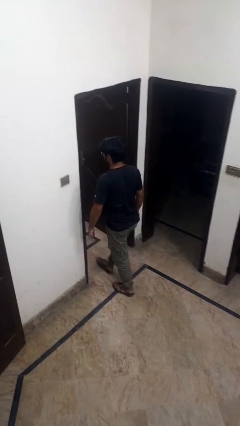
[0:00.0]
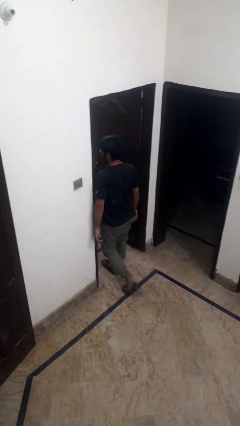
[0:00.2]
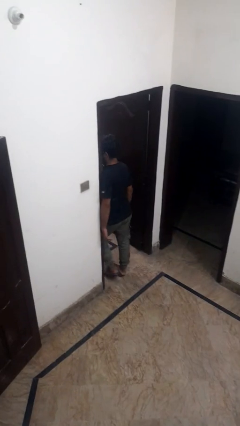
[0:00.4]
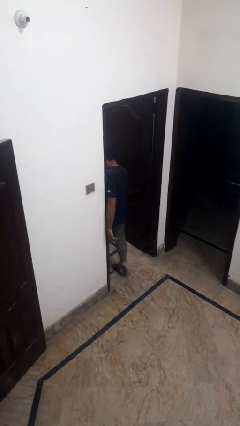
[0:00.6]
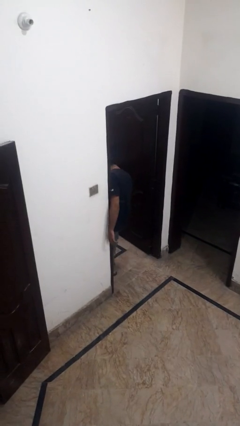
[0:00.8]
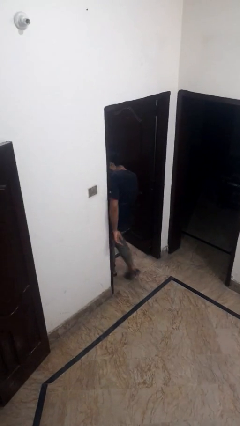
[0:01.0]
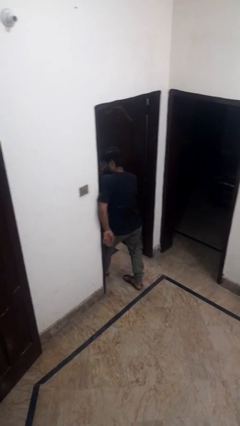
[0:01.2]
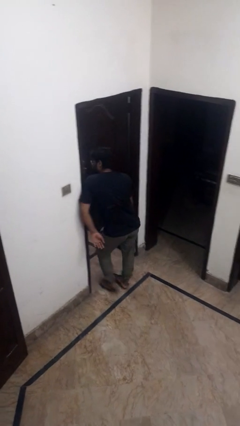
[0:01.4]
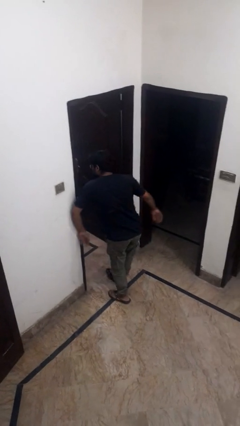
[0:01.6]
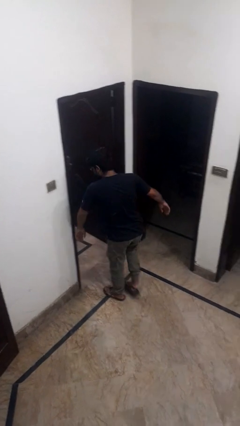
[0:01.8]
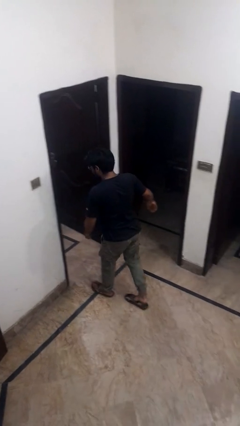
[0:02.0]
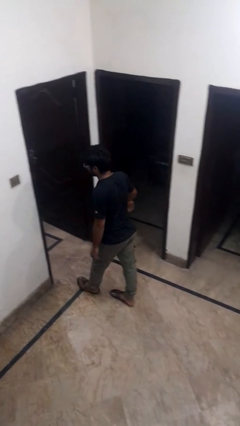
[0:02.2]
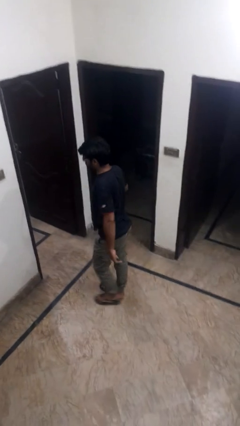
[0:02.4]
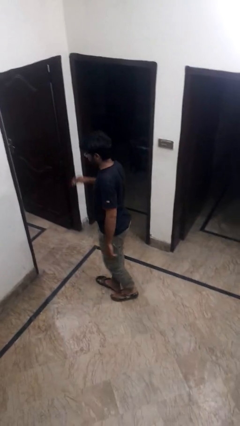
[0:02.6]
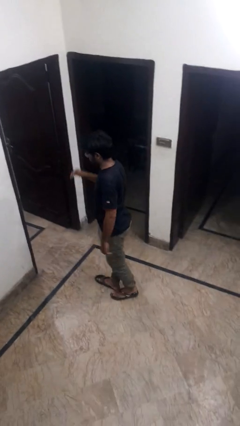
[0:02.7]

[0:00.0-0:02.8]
person bumps into wall

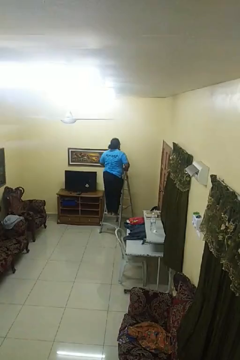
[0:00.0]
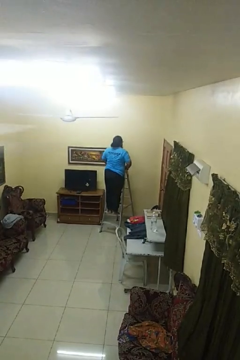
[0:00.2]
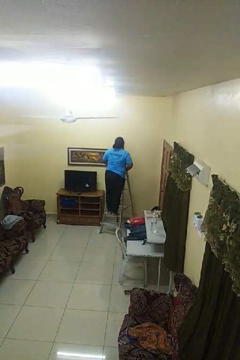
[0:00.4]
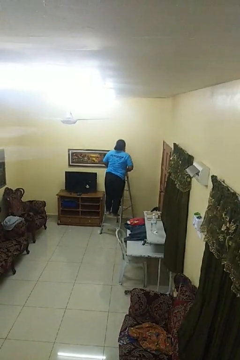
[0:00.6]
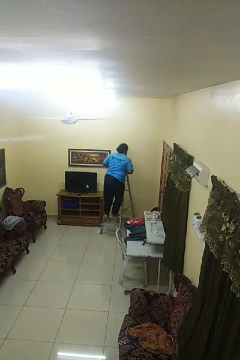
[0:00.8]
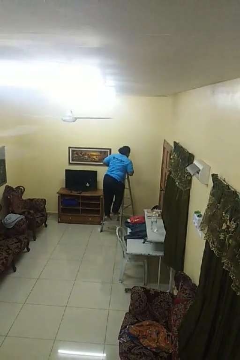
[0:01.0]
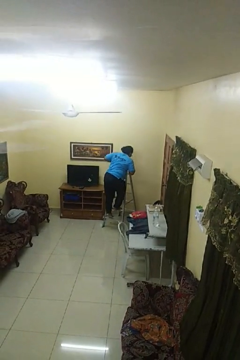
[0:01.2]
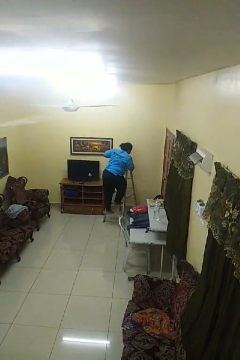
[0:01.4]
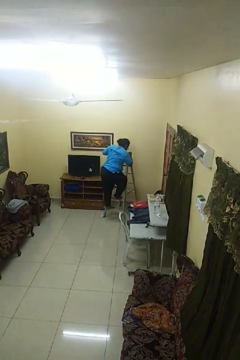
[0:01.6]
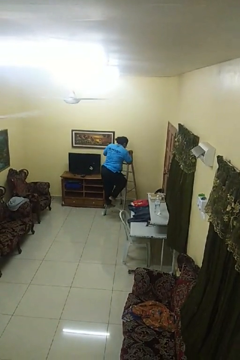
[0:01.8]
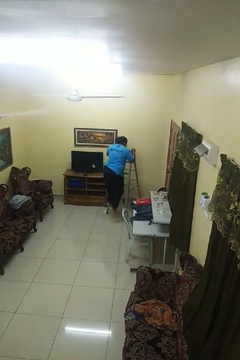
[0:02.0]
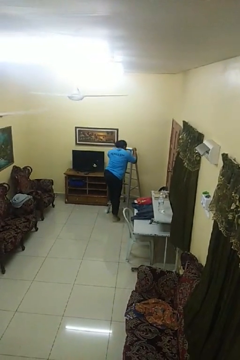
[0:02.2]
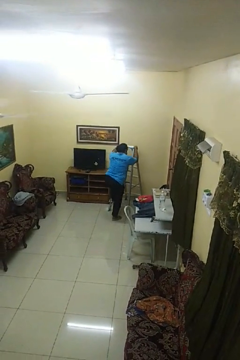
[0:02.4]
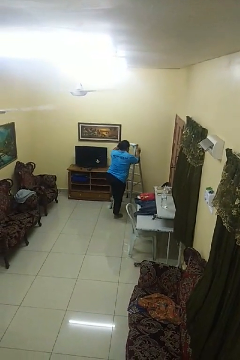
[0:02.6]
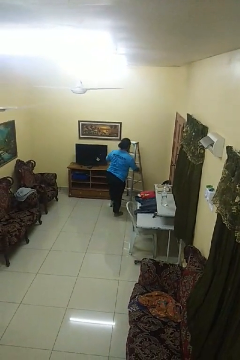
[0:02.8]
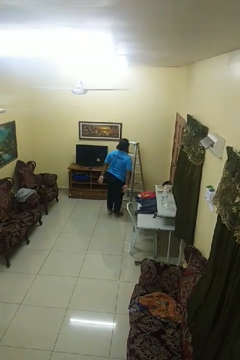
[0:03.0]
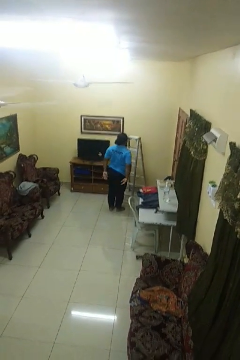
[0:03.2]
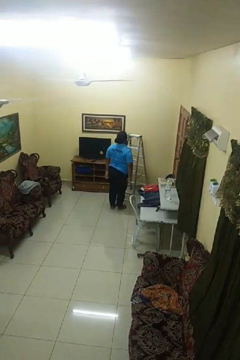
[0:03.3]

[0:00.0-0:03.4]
person climbs down ladder

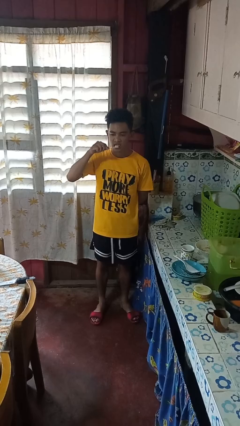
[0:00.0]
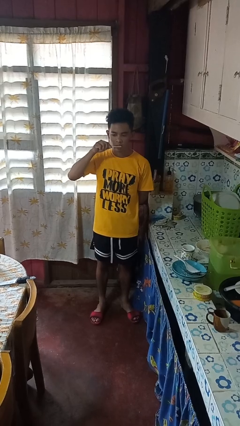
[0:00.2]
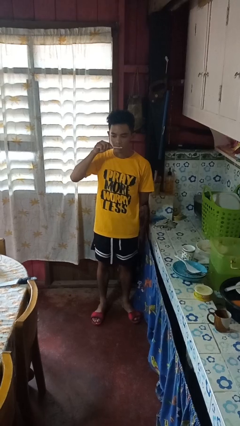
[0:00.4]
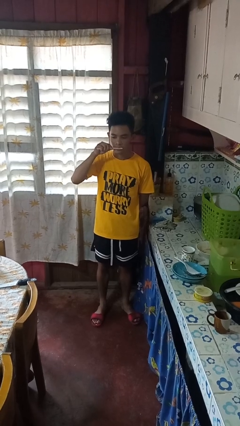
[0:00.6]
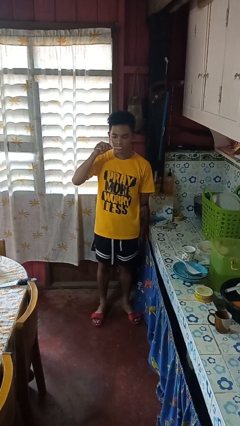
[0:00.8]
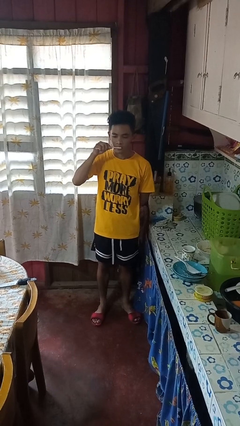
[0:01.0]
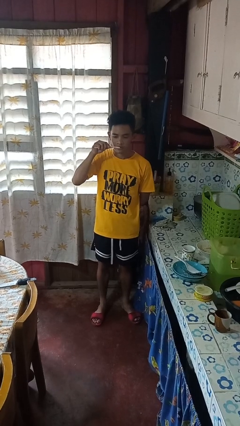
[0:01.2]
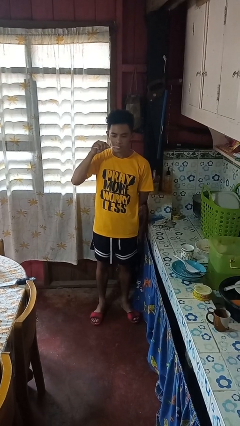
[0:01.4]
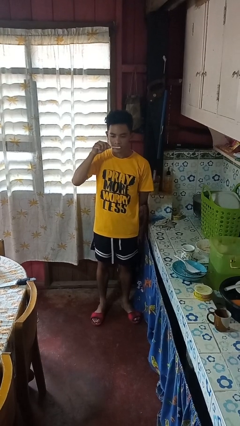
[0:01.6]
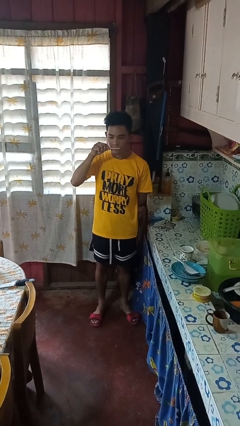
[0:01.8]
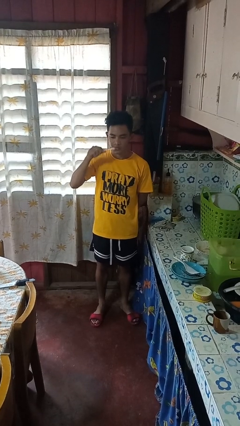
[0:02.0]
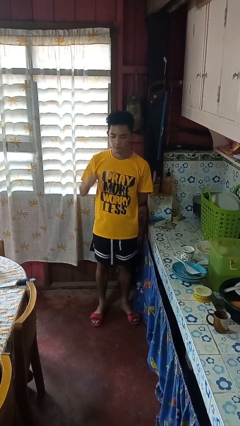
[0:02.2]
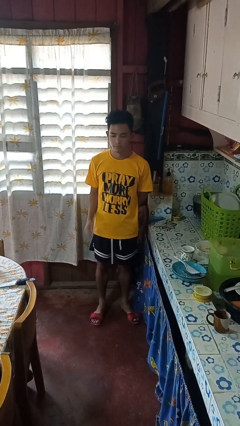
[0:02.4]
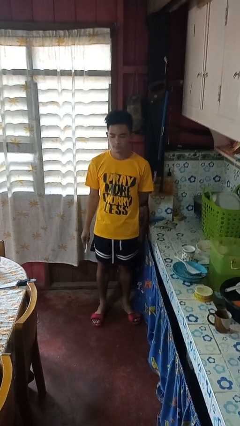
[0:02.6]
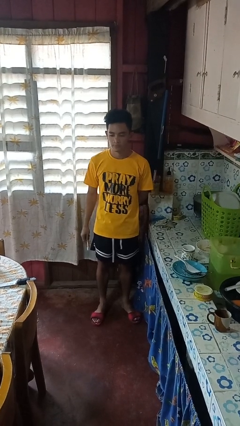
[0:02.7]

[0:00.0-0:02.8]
person brushes teeth

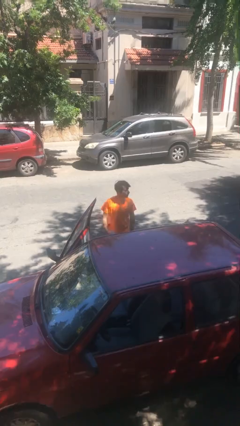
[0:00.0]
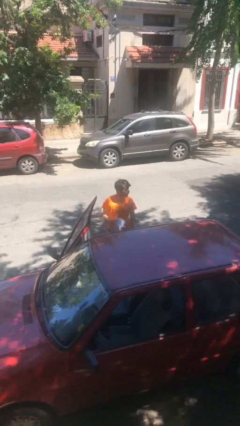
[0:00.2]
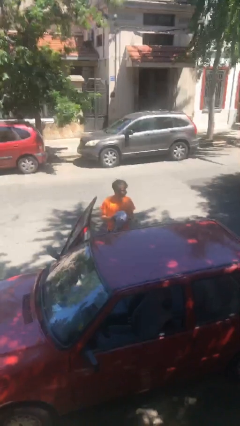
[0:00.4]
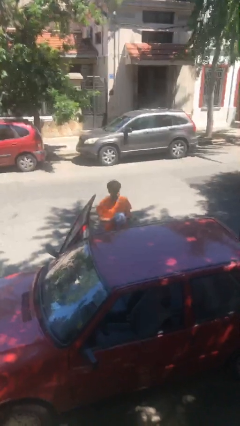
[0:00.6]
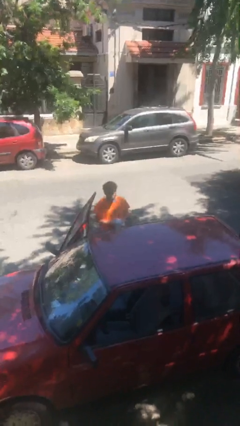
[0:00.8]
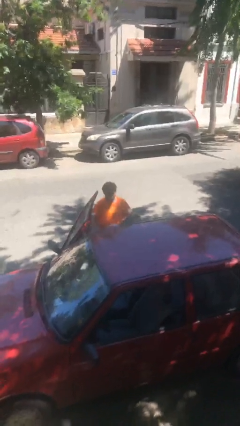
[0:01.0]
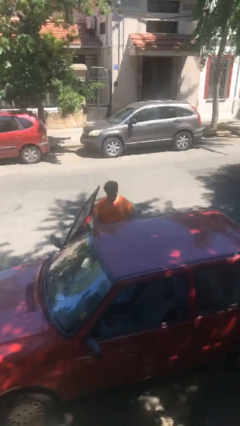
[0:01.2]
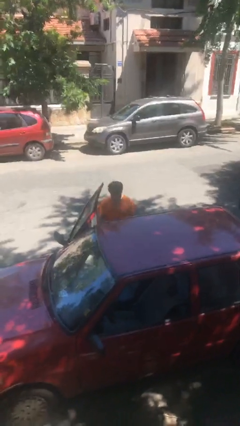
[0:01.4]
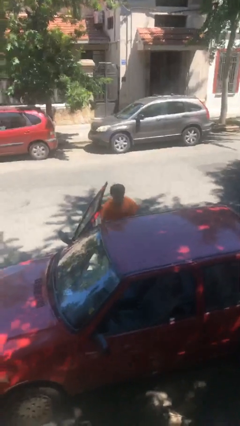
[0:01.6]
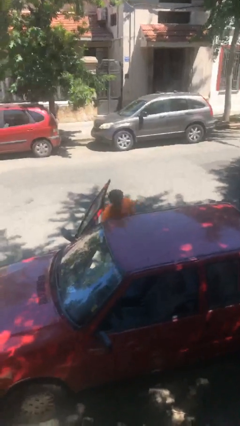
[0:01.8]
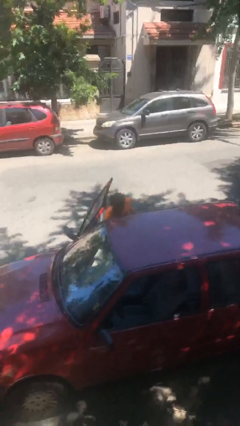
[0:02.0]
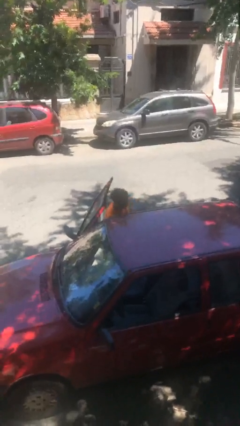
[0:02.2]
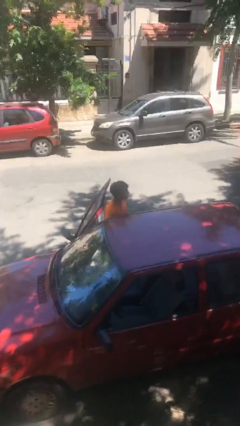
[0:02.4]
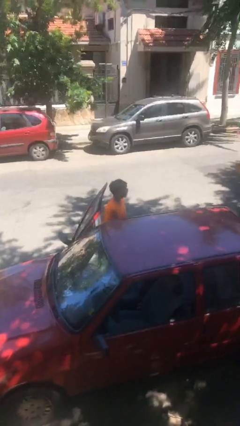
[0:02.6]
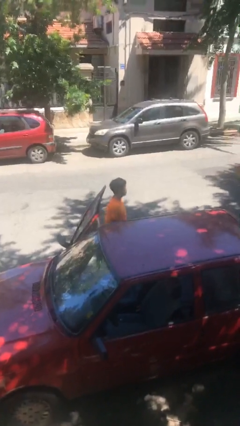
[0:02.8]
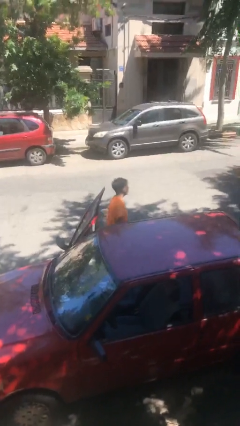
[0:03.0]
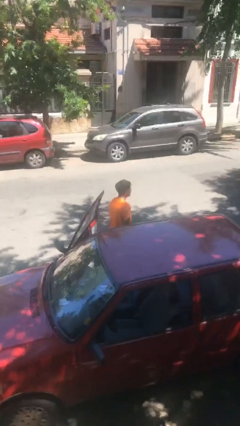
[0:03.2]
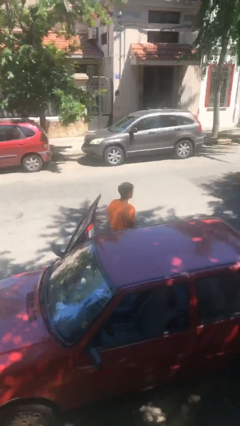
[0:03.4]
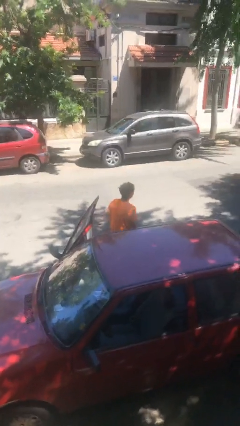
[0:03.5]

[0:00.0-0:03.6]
person loads car

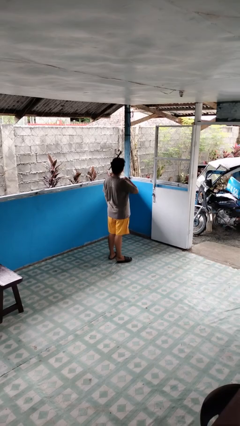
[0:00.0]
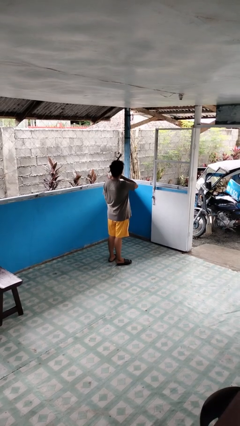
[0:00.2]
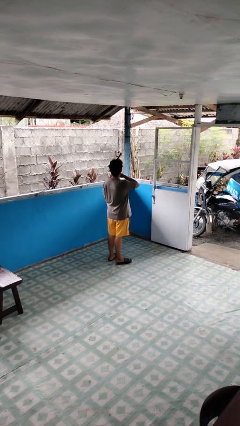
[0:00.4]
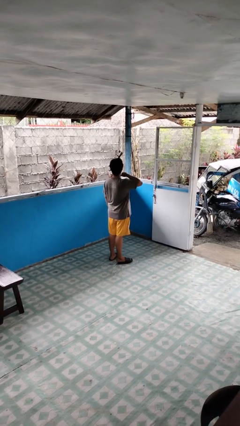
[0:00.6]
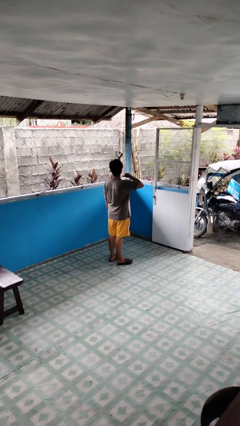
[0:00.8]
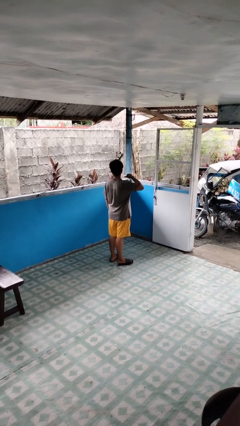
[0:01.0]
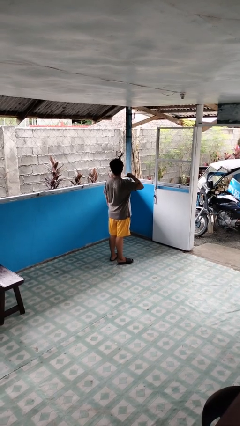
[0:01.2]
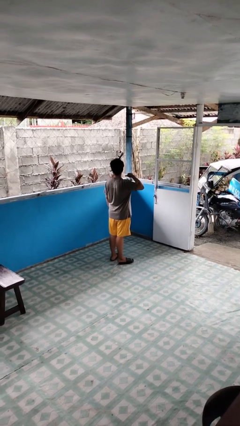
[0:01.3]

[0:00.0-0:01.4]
person gestures cut

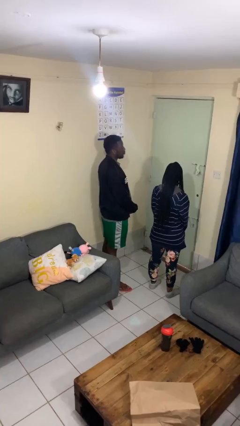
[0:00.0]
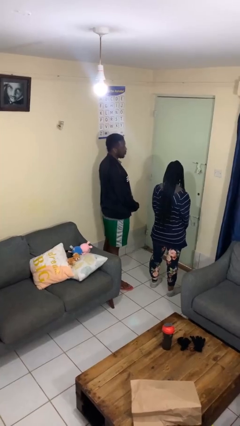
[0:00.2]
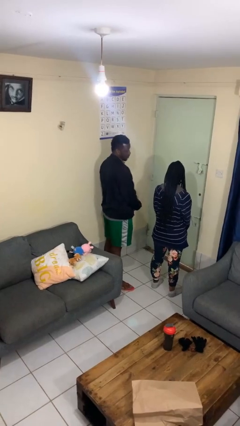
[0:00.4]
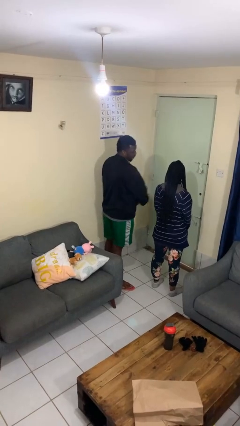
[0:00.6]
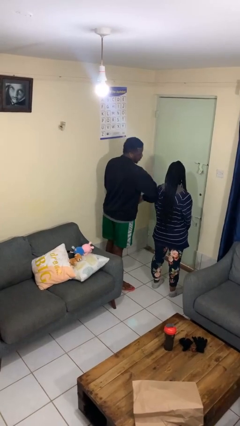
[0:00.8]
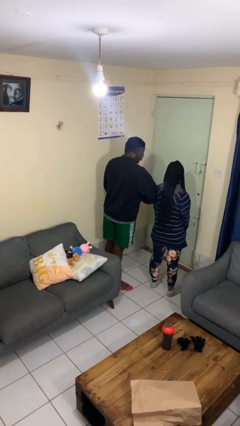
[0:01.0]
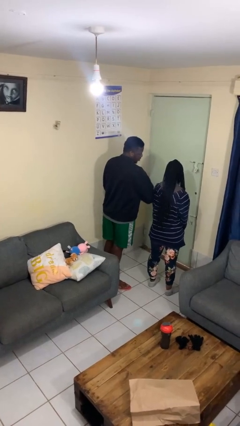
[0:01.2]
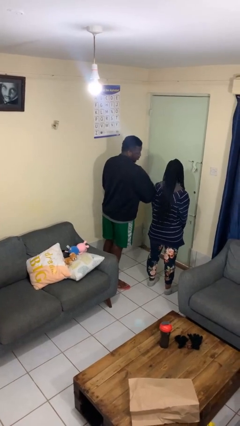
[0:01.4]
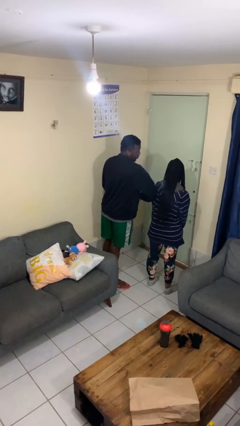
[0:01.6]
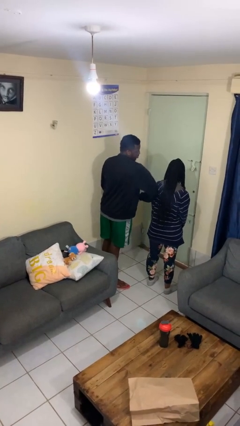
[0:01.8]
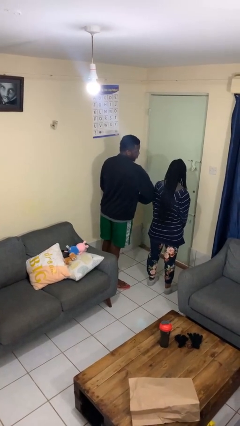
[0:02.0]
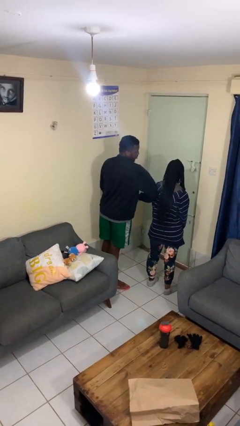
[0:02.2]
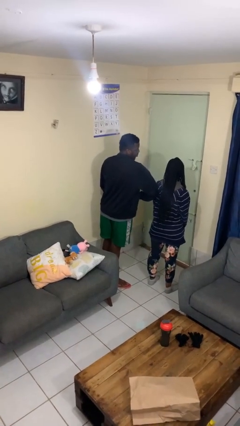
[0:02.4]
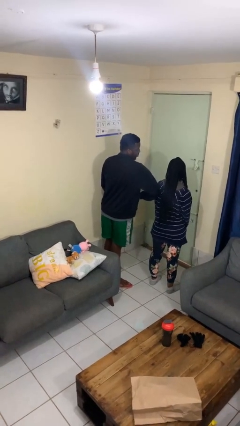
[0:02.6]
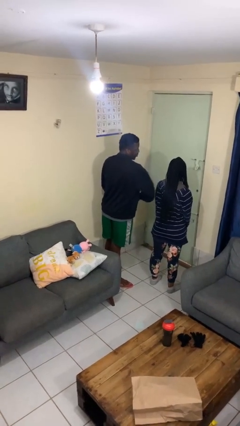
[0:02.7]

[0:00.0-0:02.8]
person nudges person with elbow

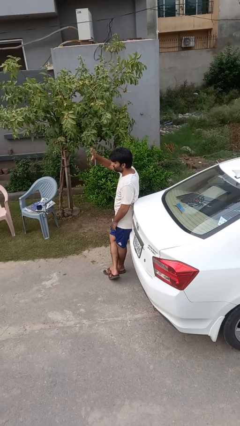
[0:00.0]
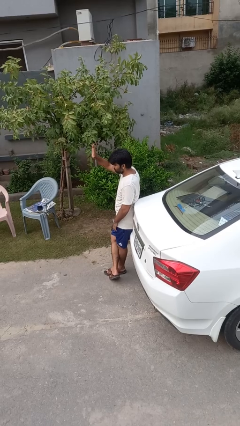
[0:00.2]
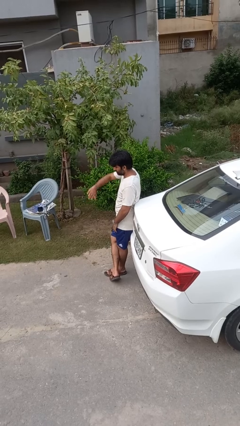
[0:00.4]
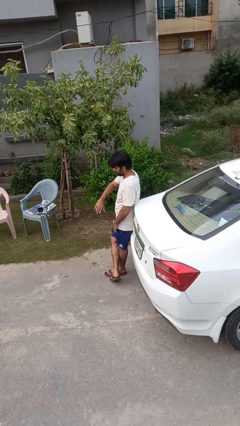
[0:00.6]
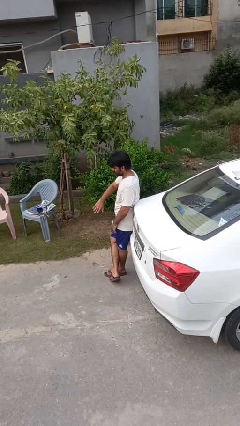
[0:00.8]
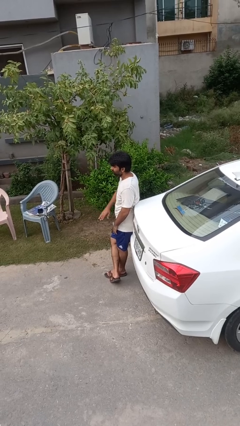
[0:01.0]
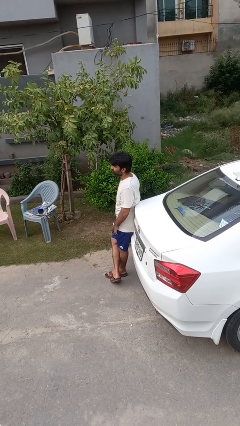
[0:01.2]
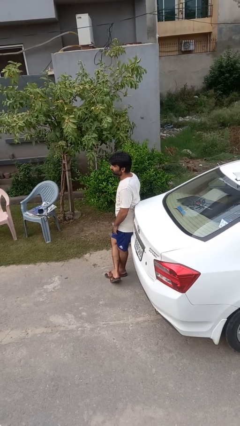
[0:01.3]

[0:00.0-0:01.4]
person gestures swipe down
